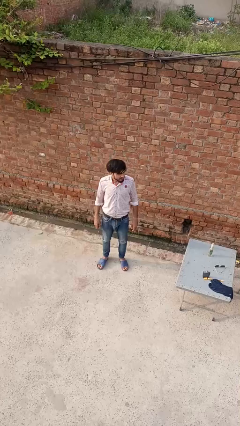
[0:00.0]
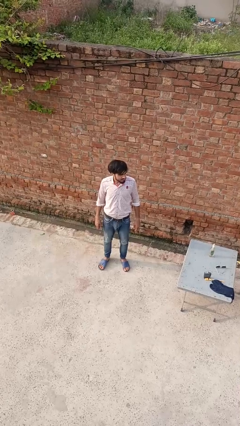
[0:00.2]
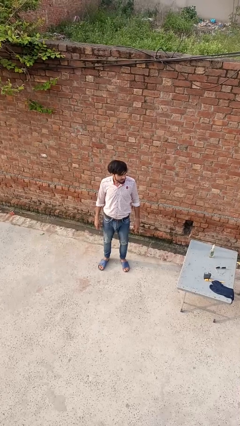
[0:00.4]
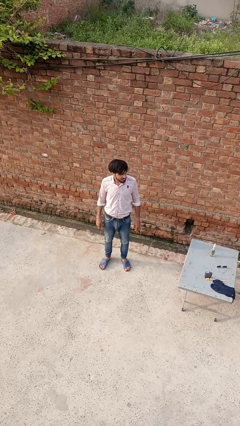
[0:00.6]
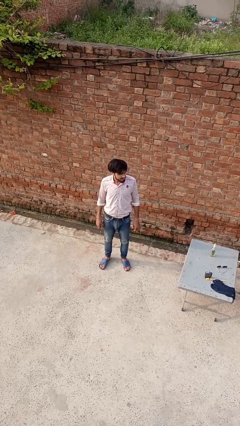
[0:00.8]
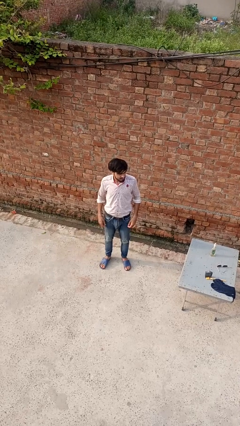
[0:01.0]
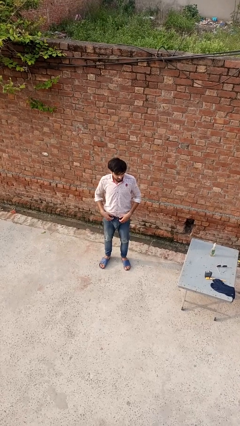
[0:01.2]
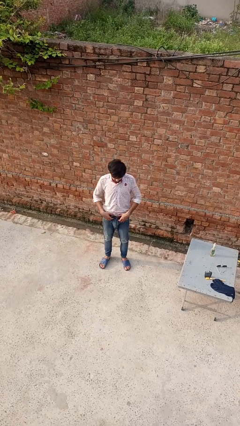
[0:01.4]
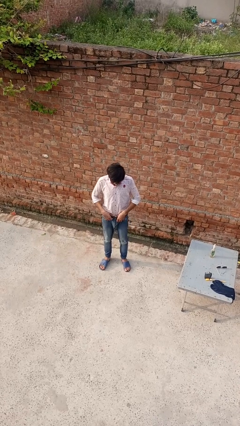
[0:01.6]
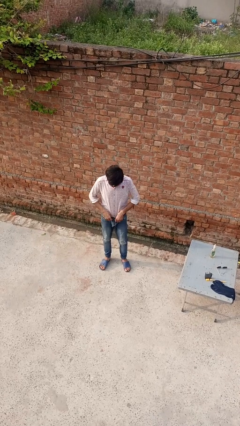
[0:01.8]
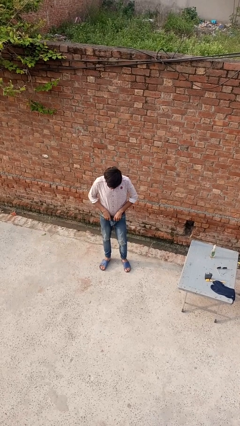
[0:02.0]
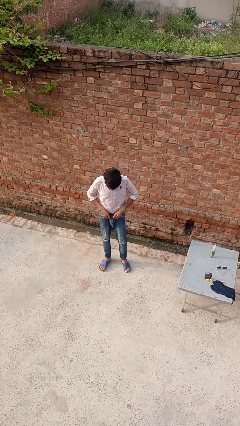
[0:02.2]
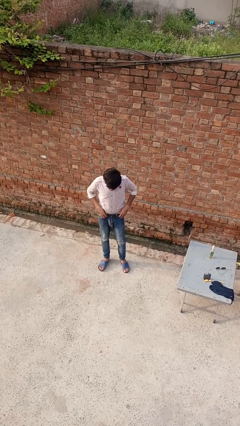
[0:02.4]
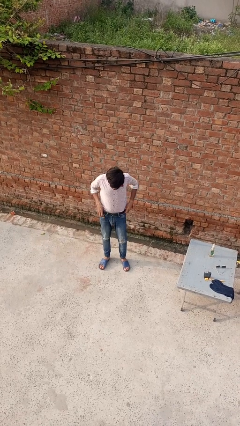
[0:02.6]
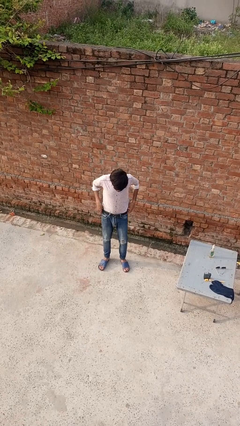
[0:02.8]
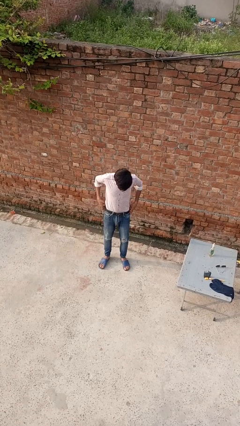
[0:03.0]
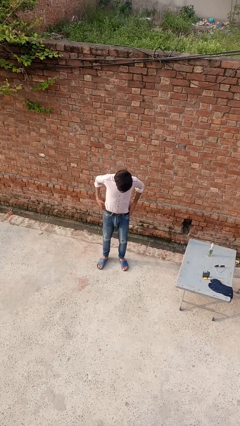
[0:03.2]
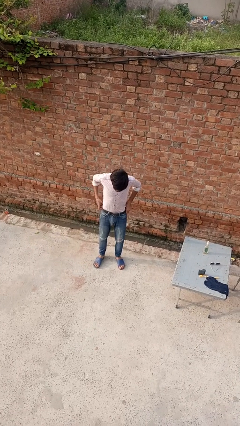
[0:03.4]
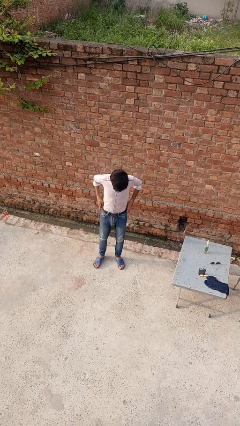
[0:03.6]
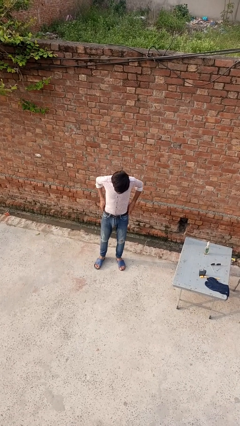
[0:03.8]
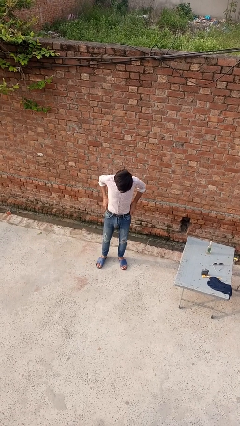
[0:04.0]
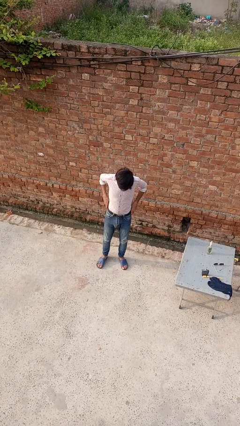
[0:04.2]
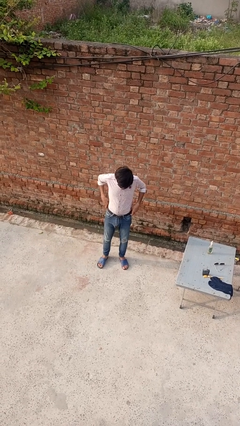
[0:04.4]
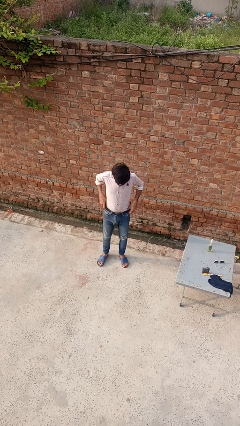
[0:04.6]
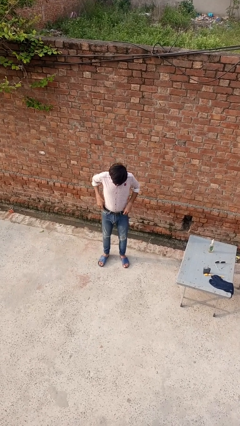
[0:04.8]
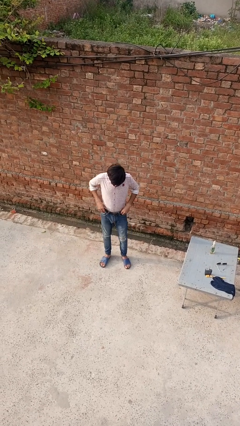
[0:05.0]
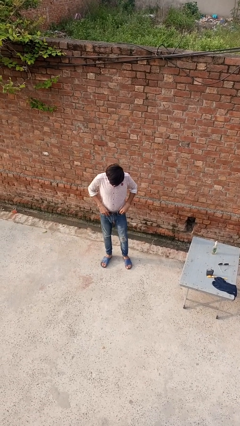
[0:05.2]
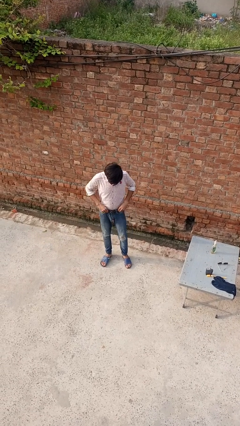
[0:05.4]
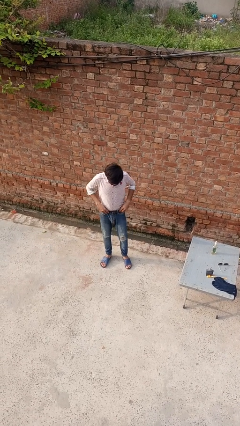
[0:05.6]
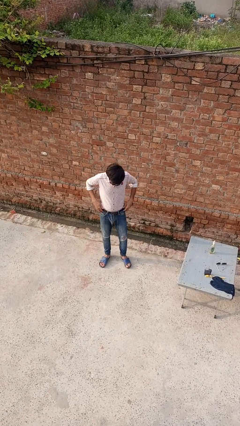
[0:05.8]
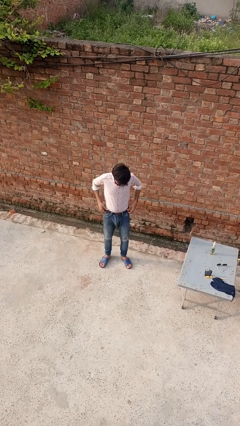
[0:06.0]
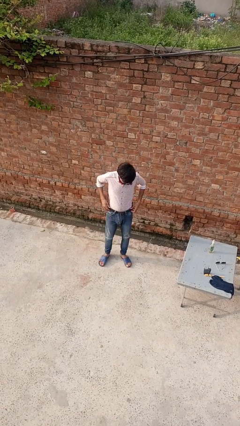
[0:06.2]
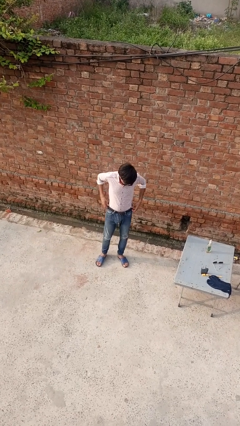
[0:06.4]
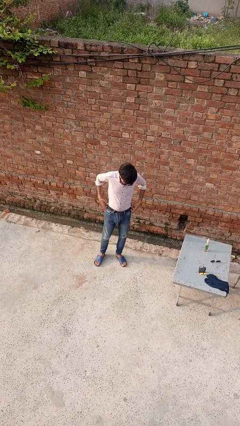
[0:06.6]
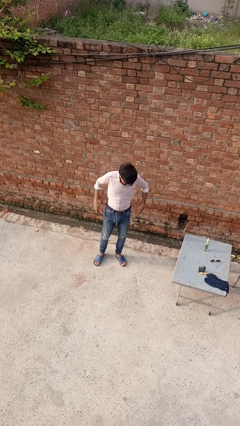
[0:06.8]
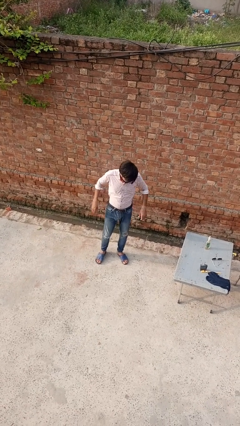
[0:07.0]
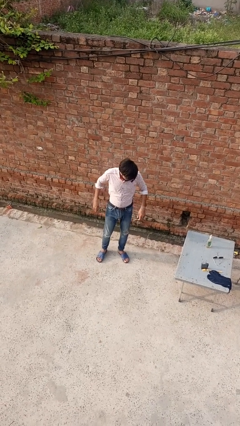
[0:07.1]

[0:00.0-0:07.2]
person hikes up pants

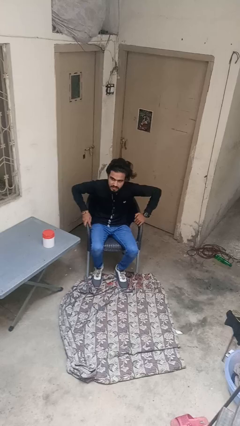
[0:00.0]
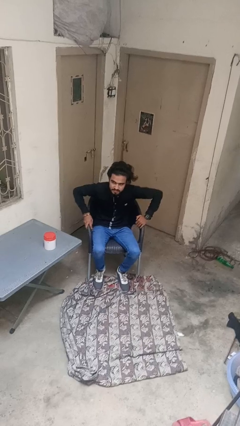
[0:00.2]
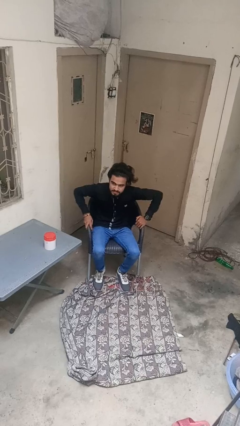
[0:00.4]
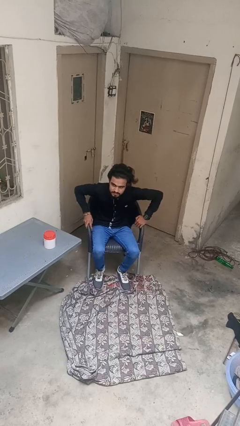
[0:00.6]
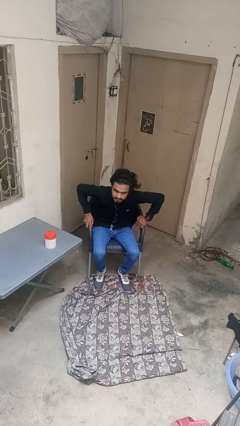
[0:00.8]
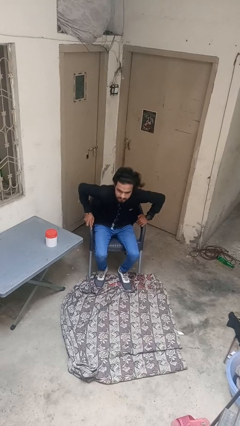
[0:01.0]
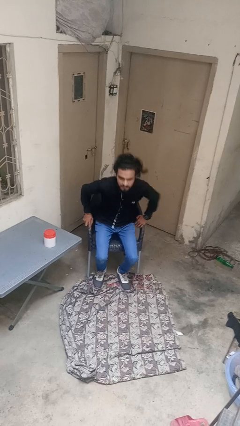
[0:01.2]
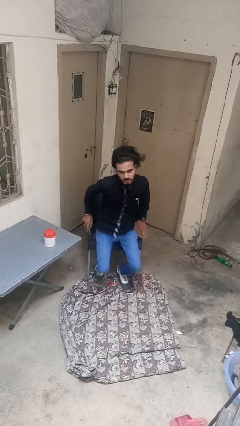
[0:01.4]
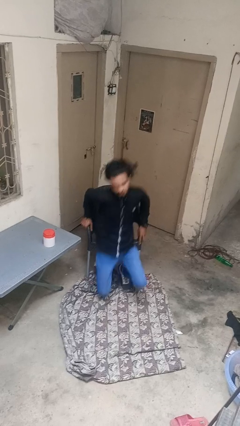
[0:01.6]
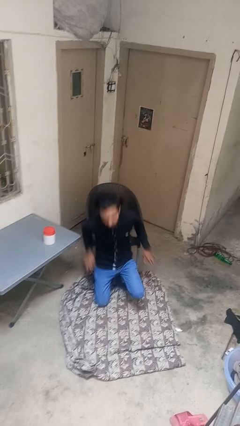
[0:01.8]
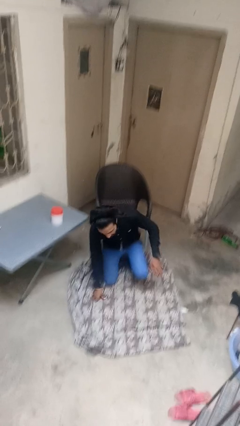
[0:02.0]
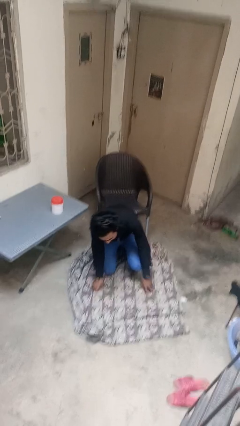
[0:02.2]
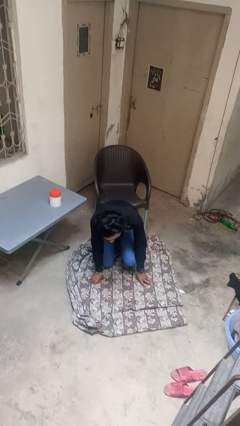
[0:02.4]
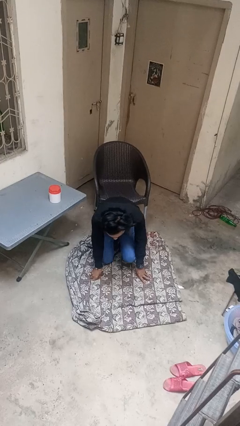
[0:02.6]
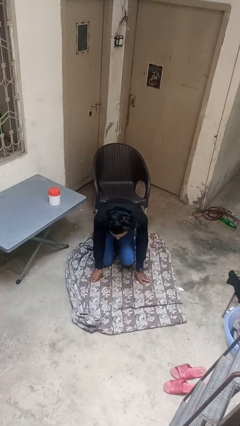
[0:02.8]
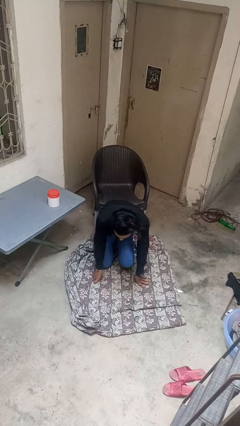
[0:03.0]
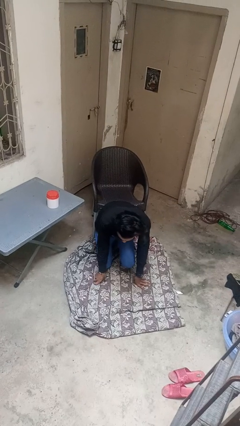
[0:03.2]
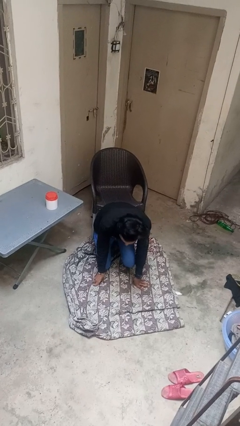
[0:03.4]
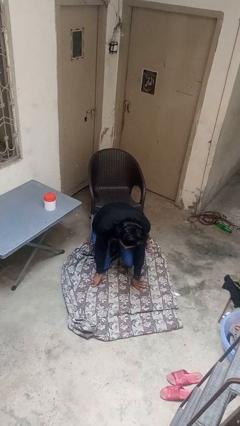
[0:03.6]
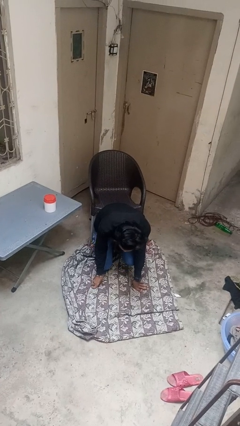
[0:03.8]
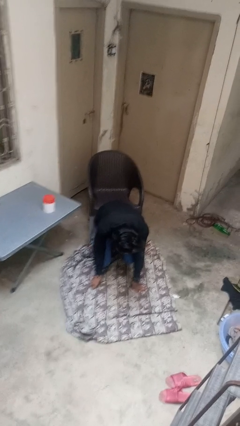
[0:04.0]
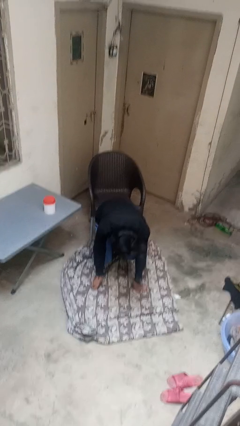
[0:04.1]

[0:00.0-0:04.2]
person falls from chair

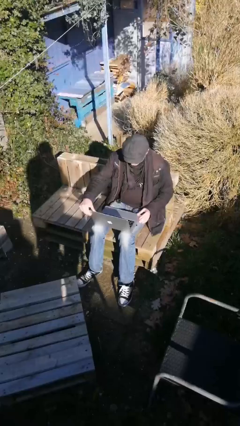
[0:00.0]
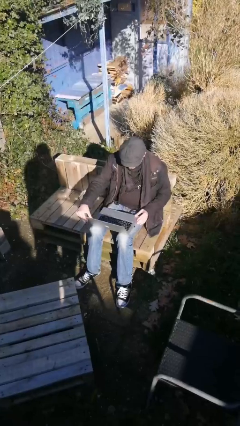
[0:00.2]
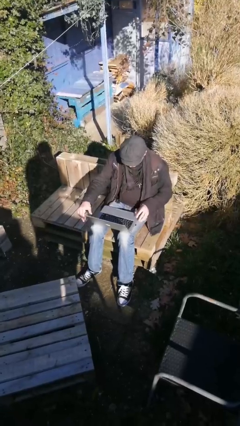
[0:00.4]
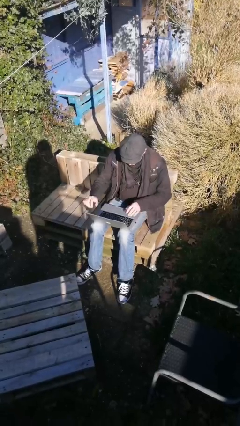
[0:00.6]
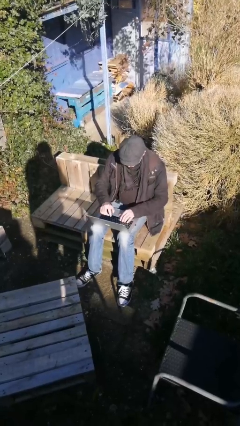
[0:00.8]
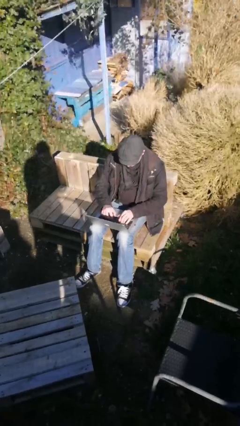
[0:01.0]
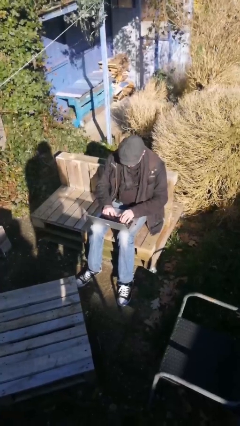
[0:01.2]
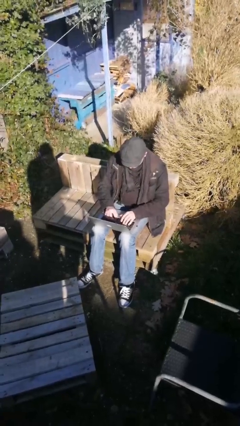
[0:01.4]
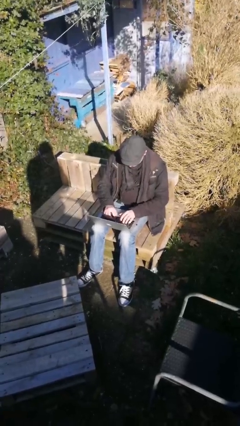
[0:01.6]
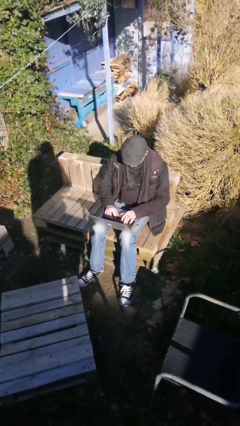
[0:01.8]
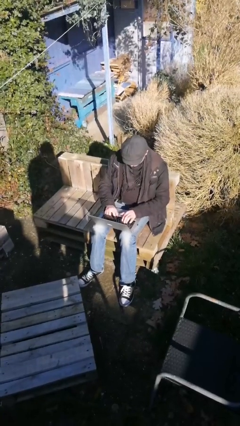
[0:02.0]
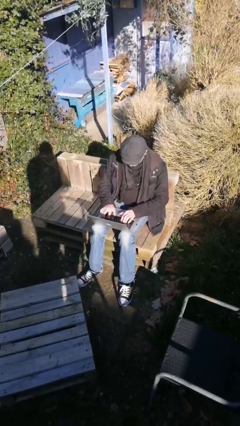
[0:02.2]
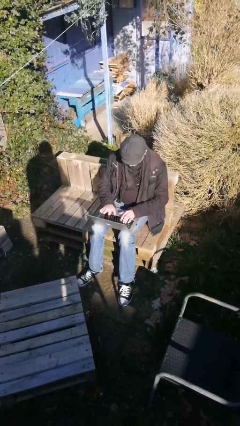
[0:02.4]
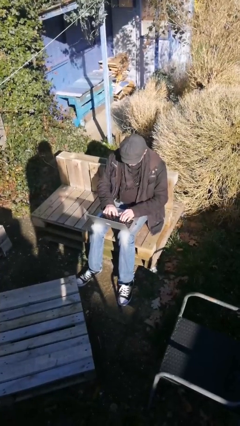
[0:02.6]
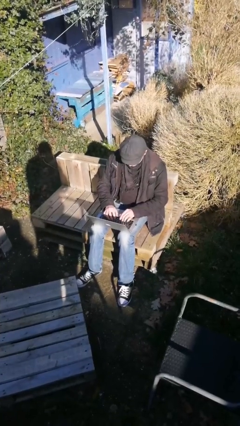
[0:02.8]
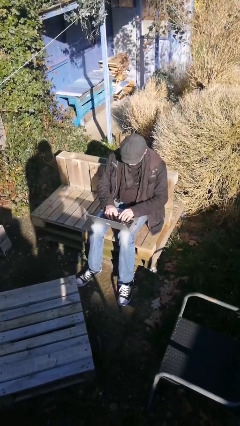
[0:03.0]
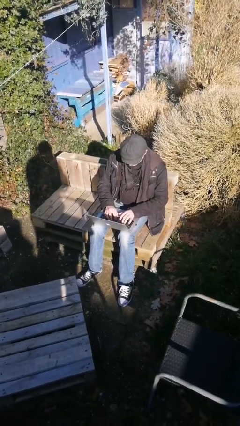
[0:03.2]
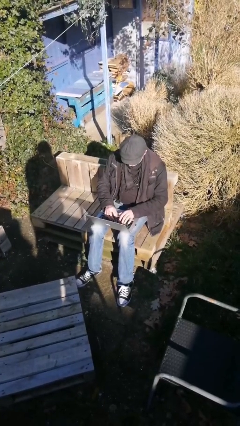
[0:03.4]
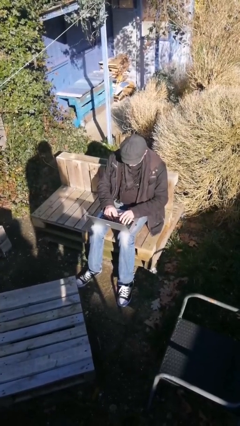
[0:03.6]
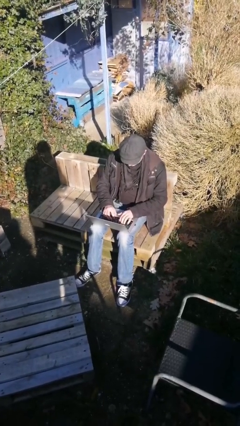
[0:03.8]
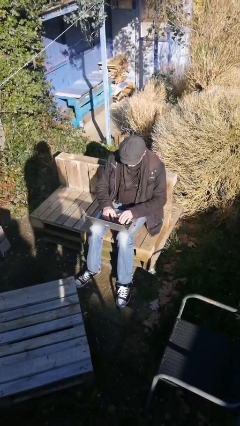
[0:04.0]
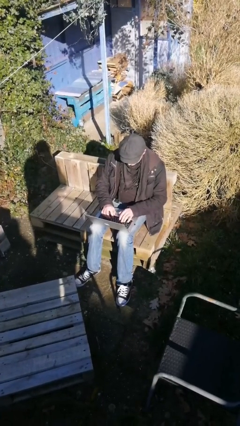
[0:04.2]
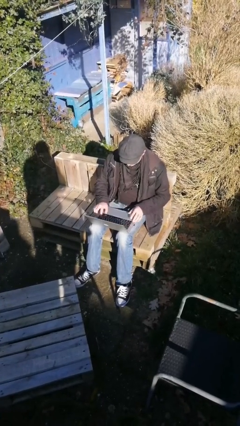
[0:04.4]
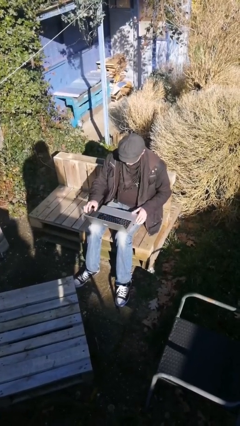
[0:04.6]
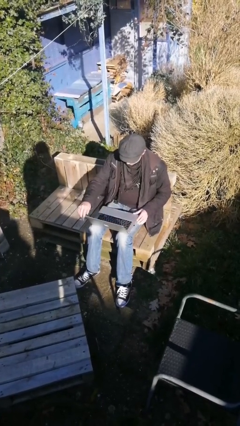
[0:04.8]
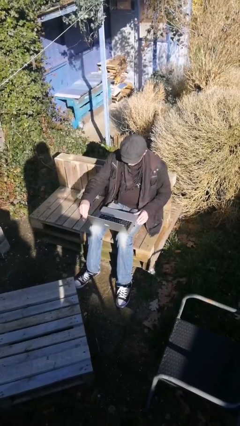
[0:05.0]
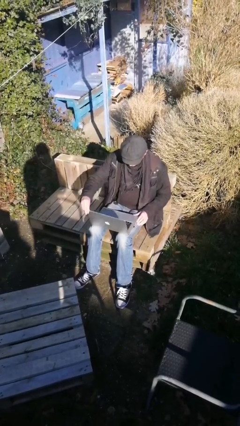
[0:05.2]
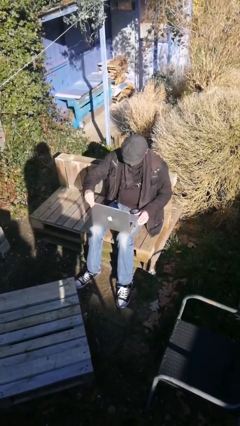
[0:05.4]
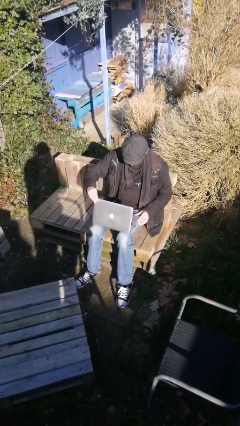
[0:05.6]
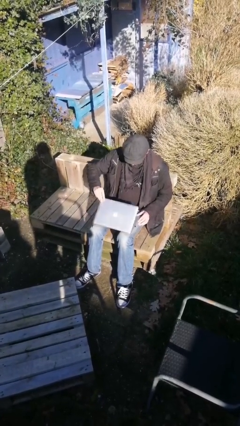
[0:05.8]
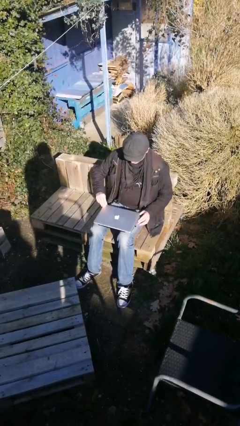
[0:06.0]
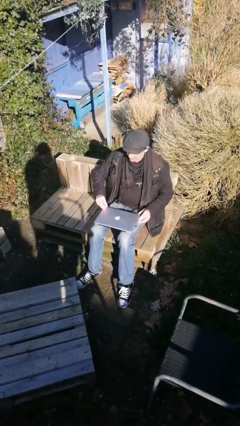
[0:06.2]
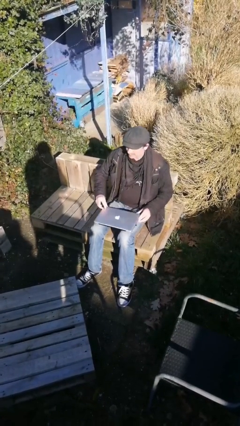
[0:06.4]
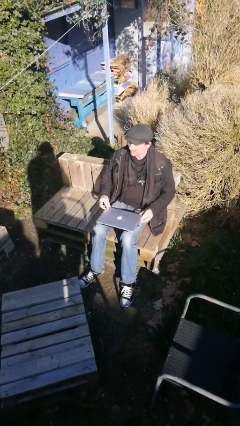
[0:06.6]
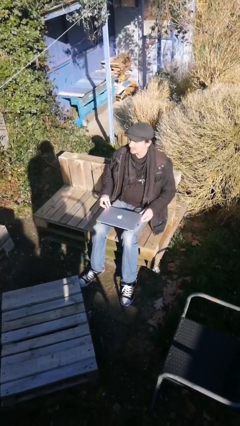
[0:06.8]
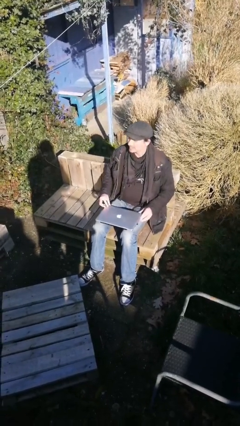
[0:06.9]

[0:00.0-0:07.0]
person interacts with laptop
